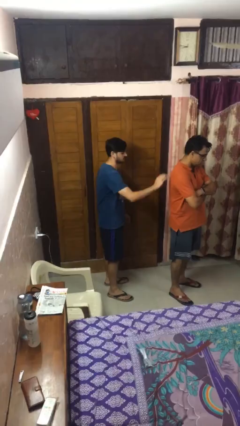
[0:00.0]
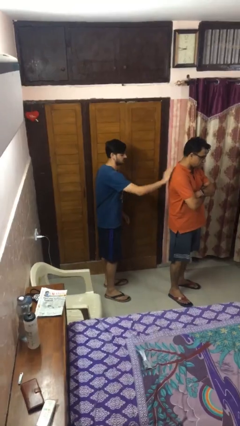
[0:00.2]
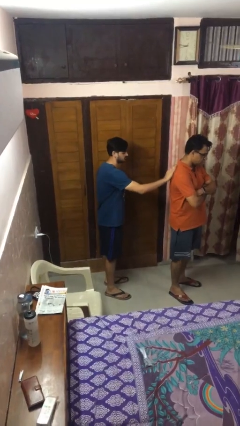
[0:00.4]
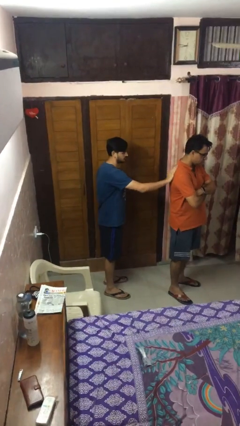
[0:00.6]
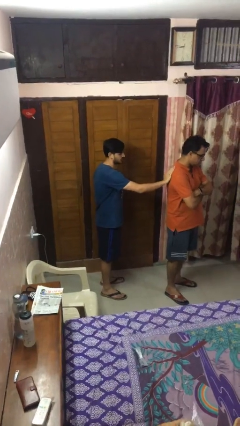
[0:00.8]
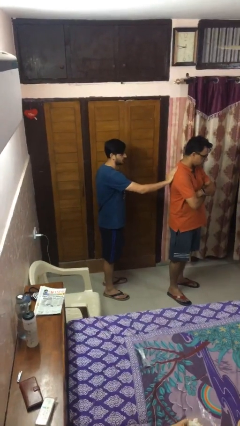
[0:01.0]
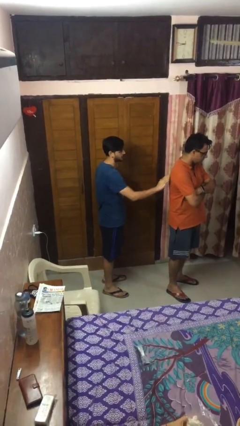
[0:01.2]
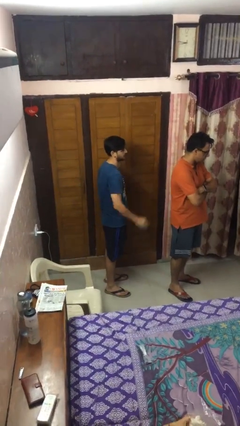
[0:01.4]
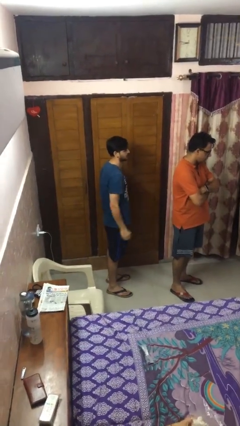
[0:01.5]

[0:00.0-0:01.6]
person touches back of person

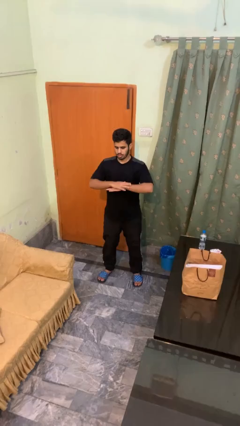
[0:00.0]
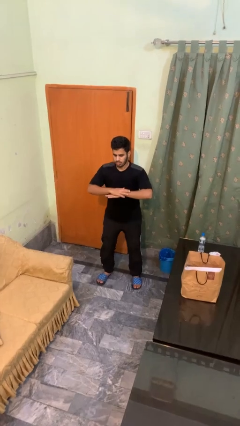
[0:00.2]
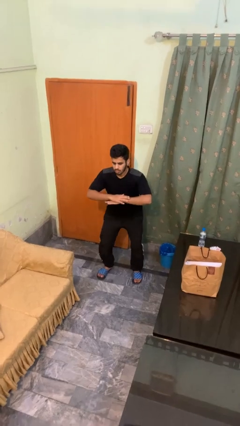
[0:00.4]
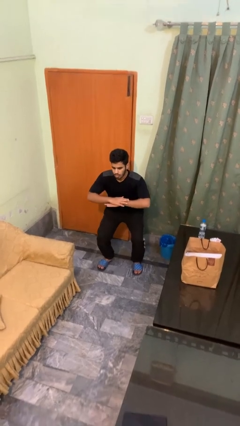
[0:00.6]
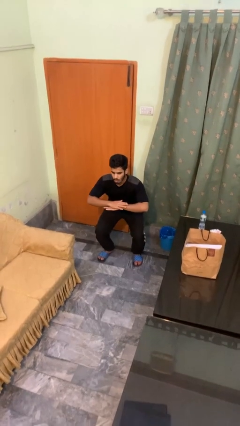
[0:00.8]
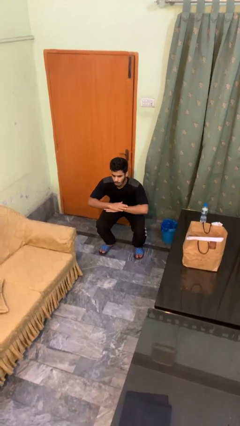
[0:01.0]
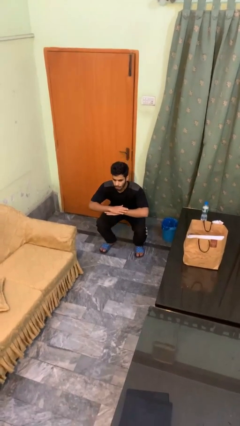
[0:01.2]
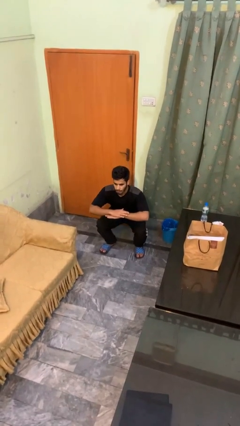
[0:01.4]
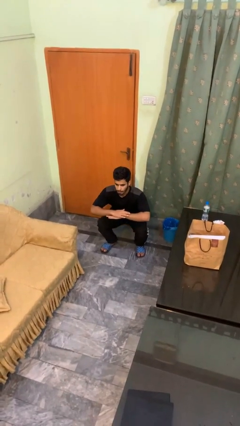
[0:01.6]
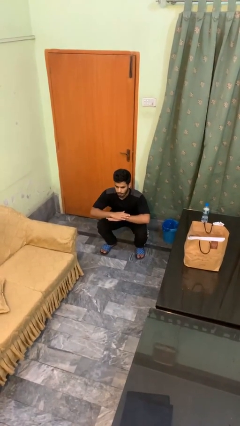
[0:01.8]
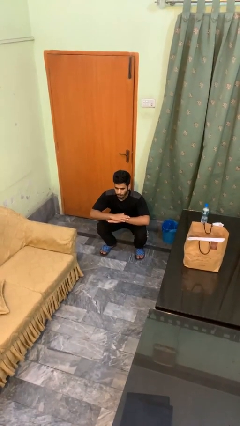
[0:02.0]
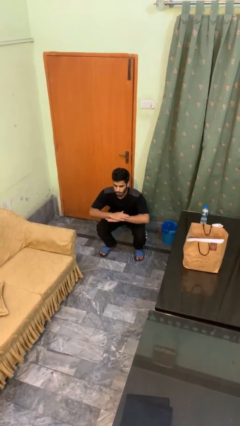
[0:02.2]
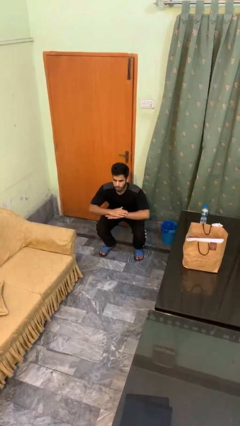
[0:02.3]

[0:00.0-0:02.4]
person squats

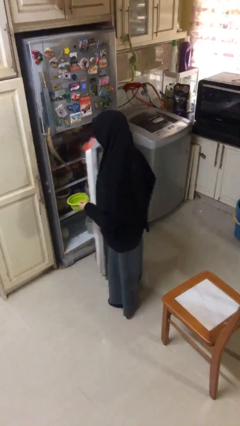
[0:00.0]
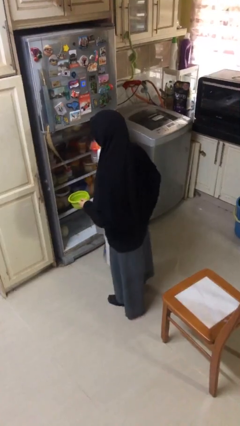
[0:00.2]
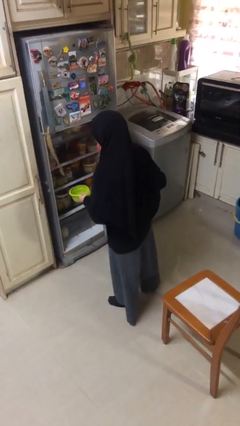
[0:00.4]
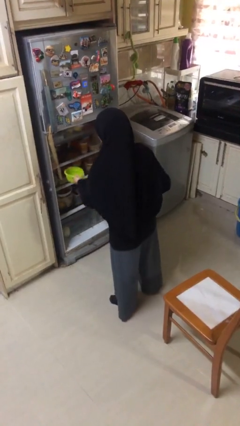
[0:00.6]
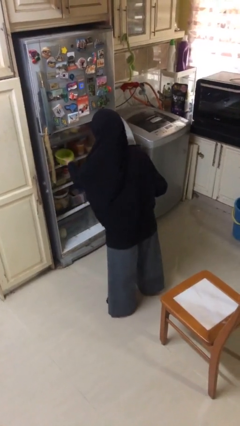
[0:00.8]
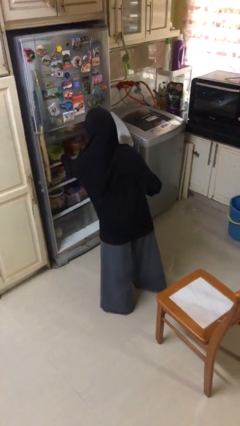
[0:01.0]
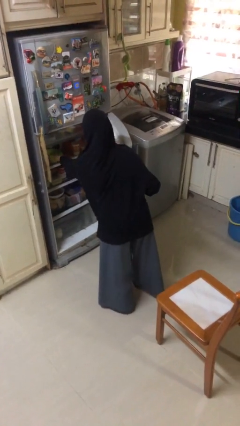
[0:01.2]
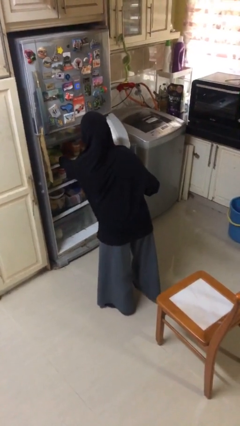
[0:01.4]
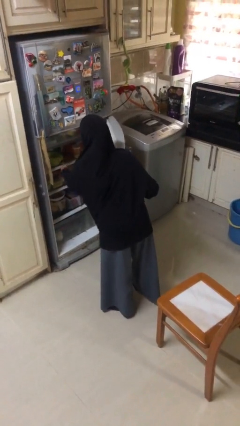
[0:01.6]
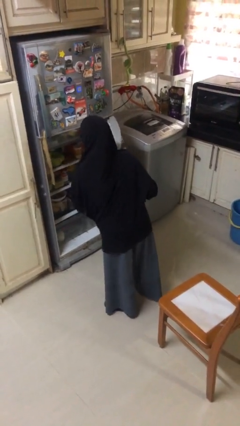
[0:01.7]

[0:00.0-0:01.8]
person puts object into refrigerator

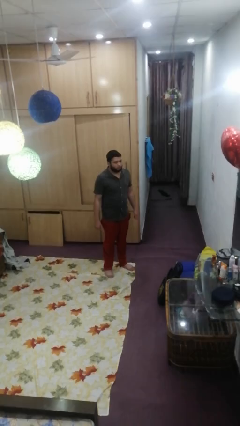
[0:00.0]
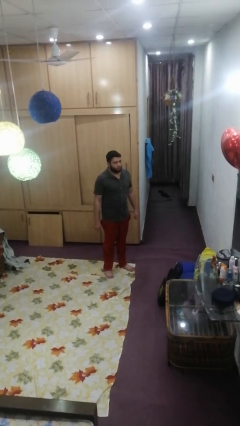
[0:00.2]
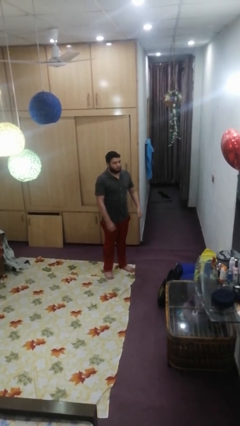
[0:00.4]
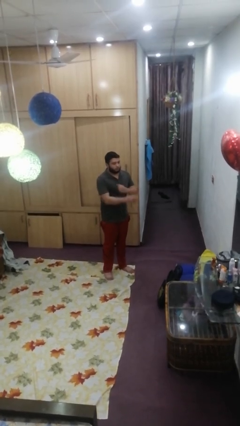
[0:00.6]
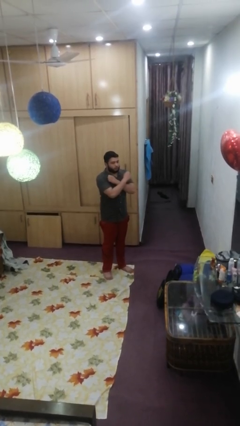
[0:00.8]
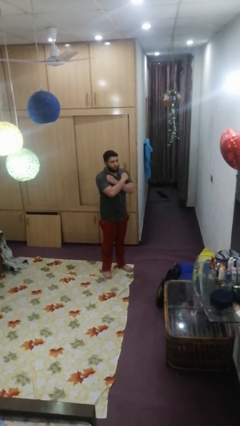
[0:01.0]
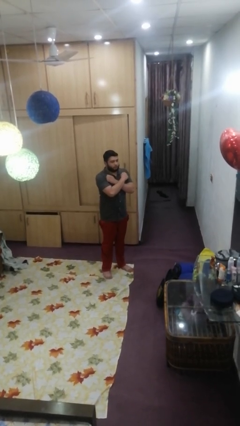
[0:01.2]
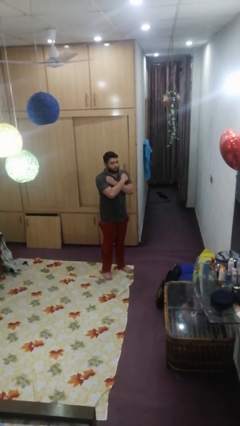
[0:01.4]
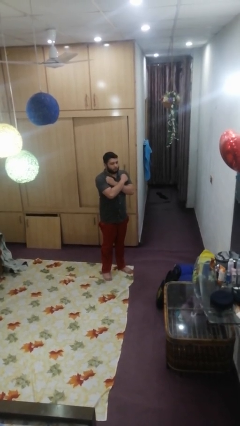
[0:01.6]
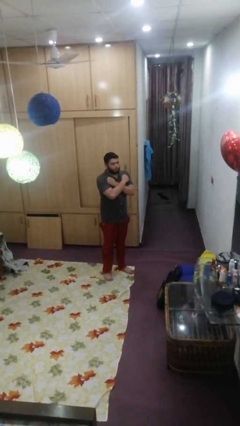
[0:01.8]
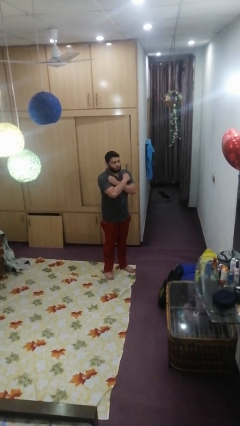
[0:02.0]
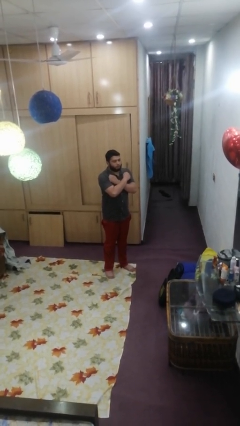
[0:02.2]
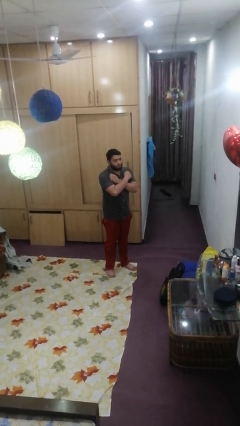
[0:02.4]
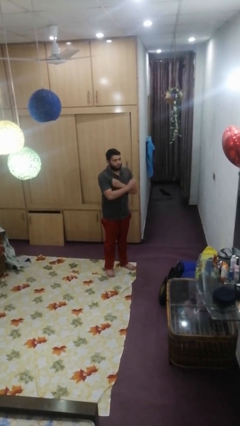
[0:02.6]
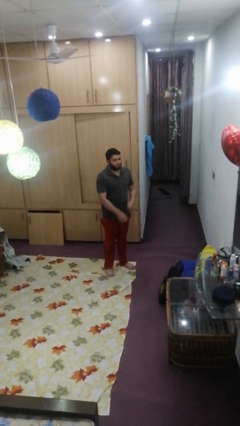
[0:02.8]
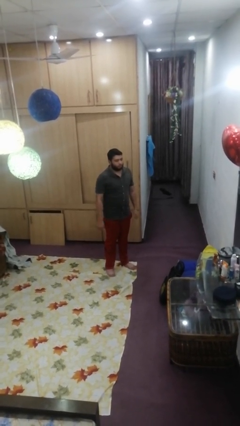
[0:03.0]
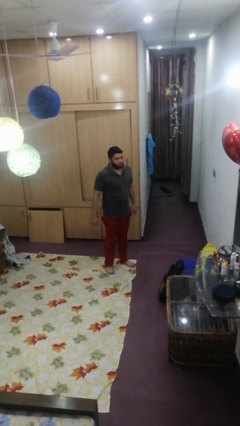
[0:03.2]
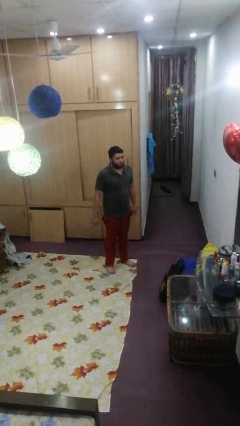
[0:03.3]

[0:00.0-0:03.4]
person crosses arms

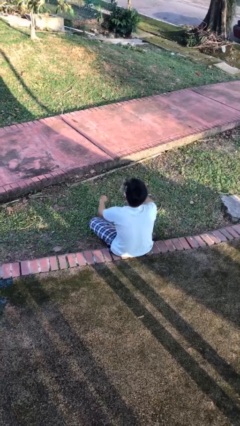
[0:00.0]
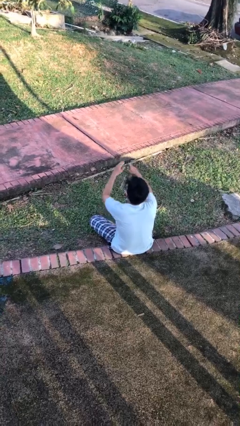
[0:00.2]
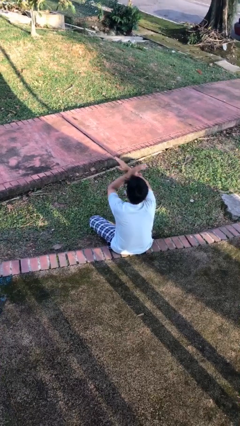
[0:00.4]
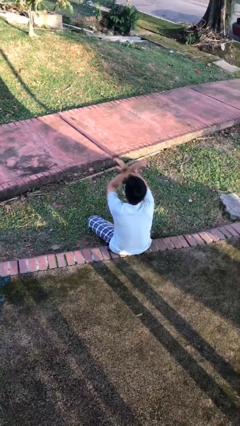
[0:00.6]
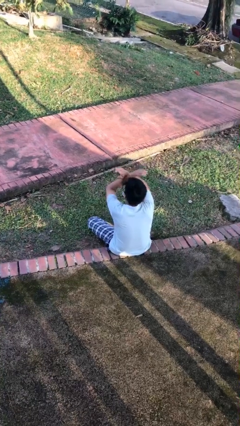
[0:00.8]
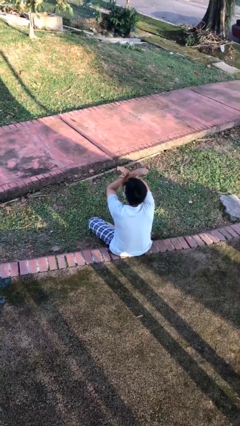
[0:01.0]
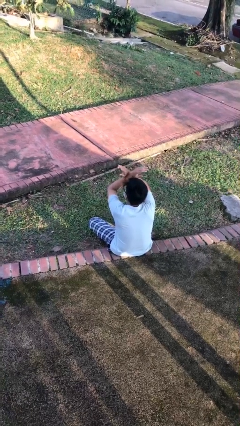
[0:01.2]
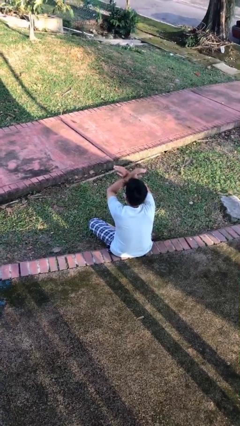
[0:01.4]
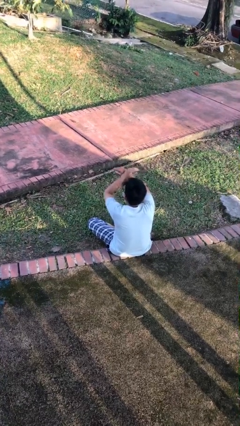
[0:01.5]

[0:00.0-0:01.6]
person gestures arms x

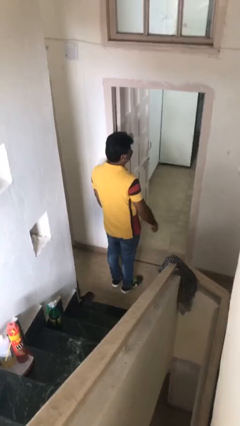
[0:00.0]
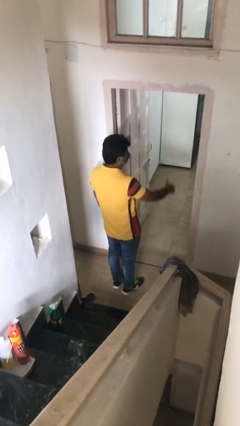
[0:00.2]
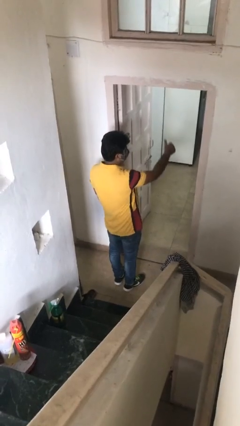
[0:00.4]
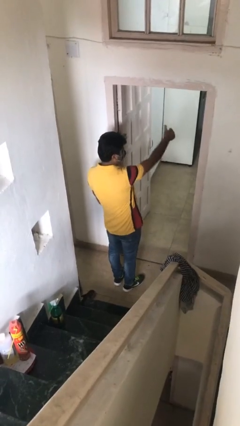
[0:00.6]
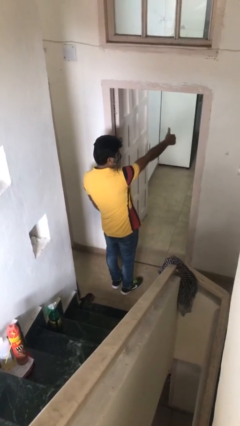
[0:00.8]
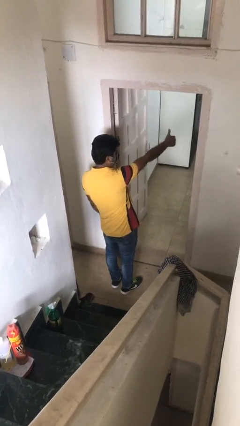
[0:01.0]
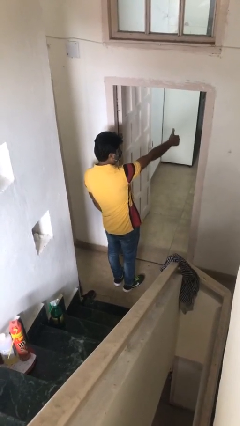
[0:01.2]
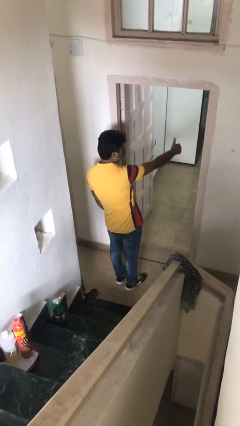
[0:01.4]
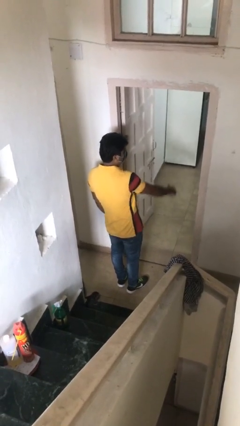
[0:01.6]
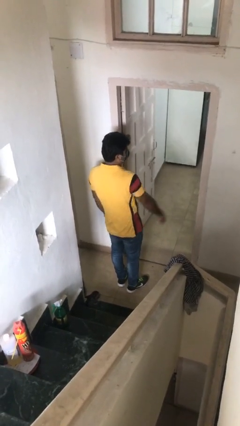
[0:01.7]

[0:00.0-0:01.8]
person gestures thumbs up

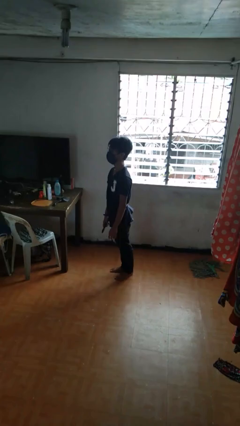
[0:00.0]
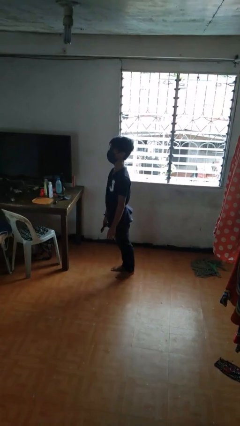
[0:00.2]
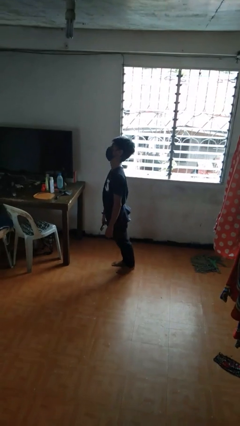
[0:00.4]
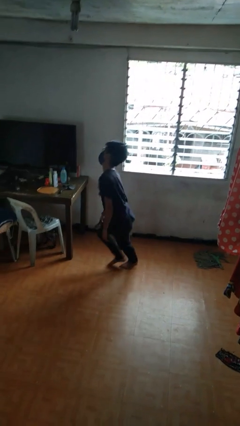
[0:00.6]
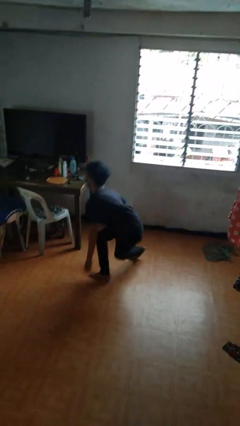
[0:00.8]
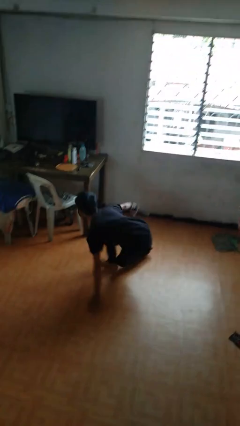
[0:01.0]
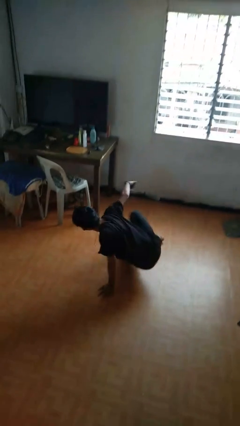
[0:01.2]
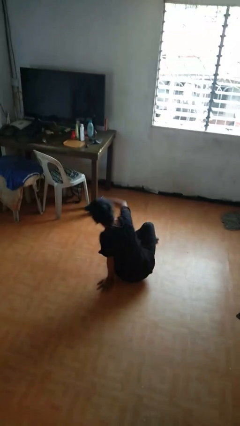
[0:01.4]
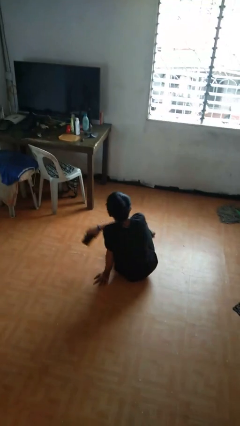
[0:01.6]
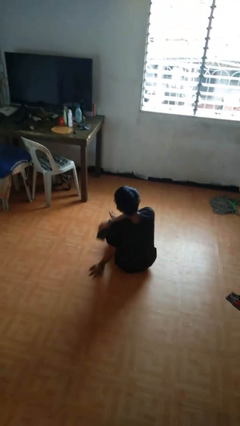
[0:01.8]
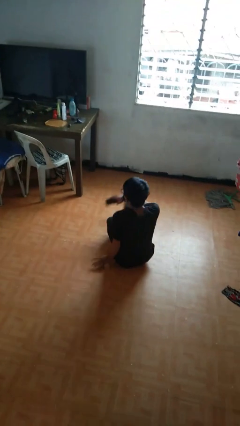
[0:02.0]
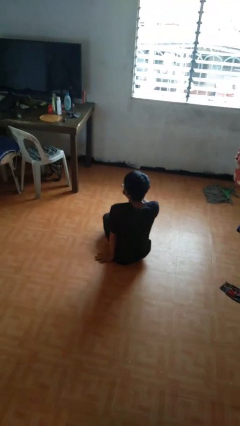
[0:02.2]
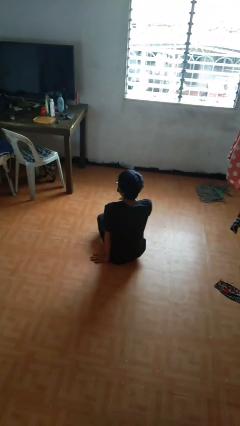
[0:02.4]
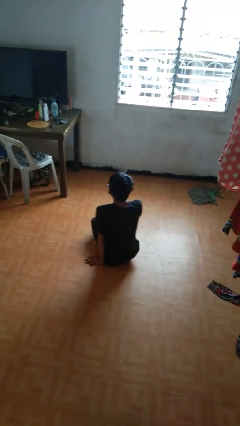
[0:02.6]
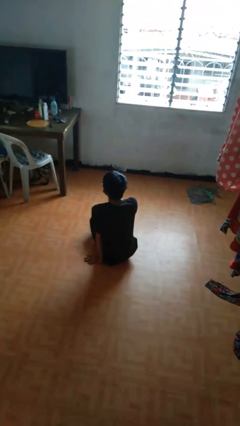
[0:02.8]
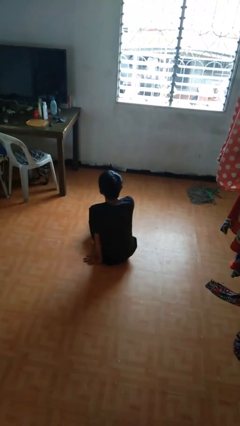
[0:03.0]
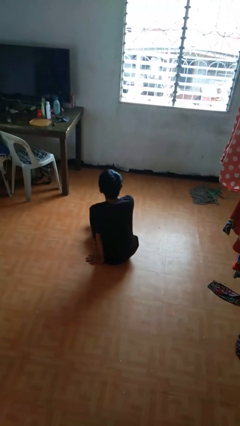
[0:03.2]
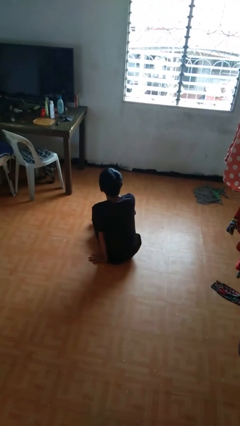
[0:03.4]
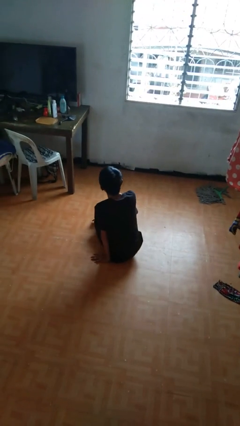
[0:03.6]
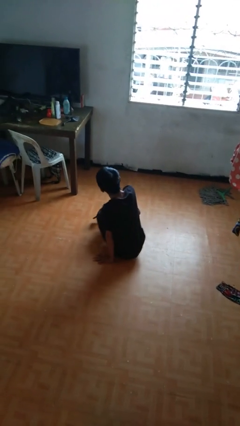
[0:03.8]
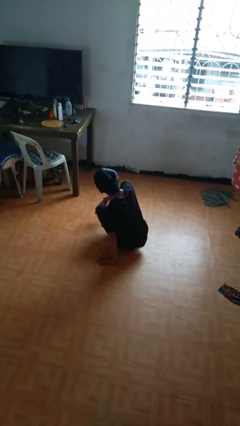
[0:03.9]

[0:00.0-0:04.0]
person falls while standing
